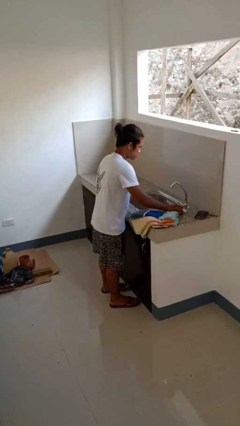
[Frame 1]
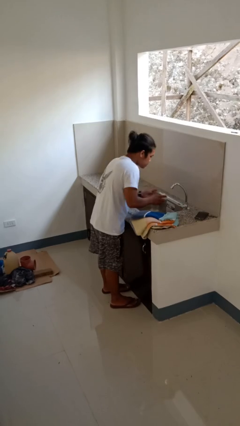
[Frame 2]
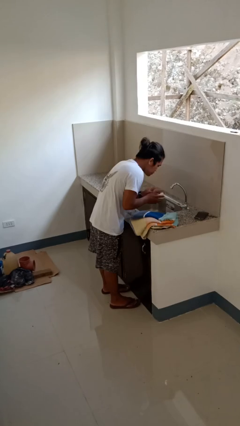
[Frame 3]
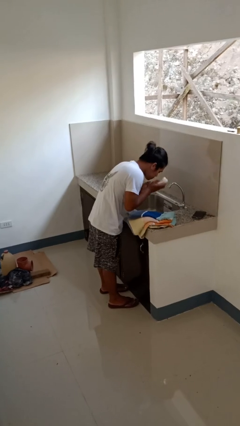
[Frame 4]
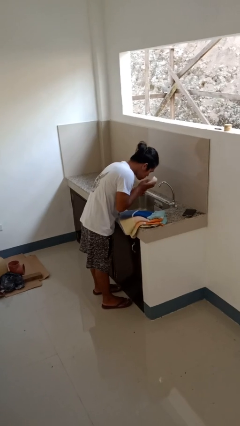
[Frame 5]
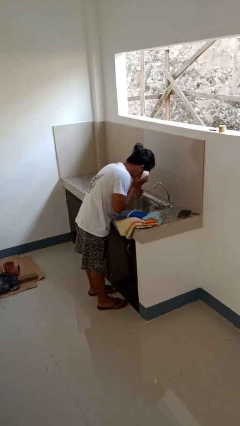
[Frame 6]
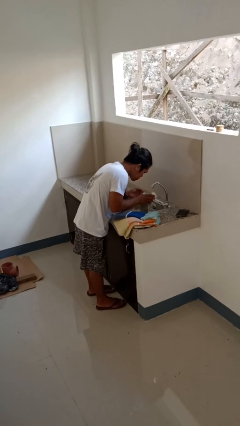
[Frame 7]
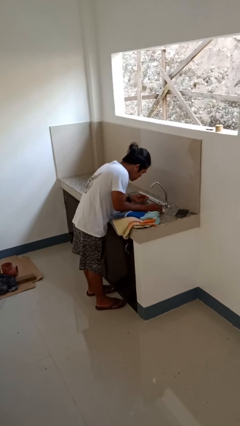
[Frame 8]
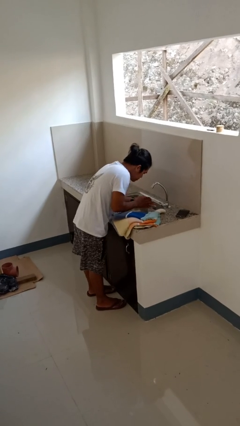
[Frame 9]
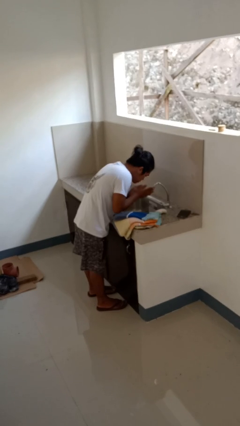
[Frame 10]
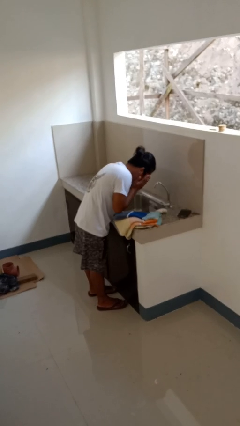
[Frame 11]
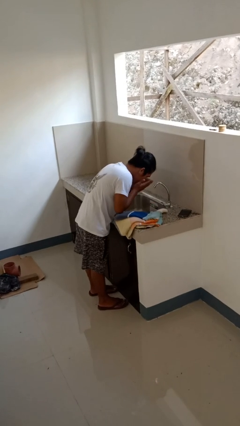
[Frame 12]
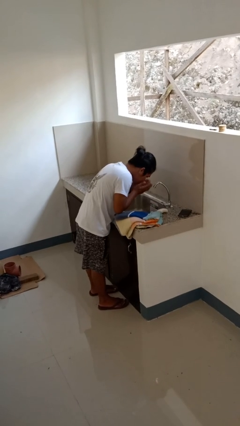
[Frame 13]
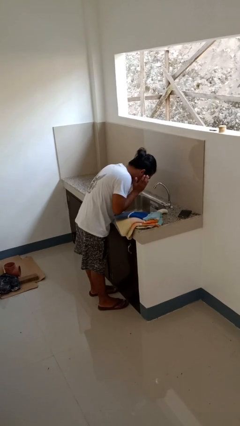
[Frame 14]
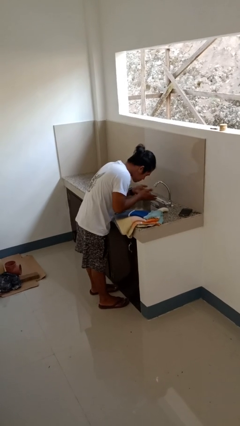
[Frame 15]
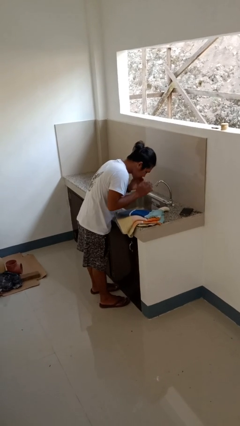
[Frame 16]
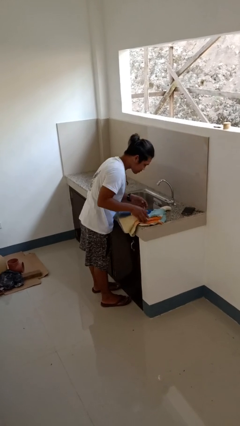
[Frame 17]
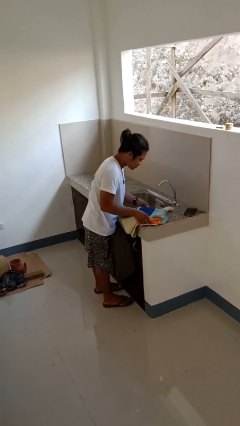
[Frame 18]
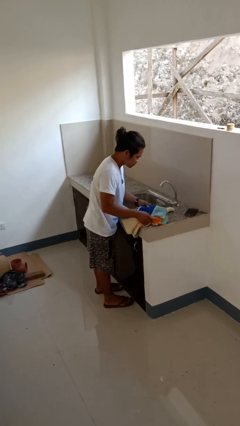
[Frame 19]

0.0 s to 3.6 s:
person washes face

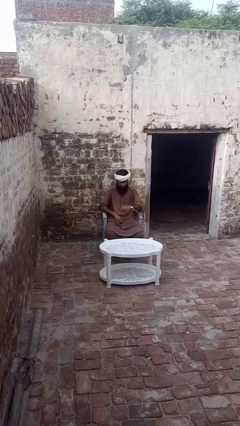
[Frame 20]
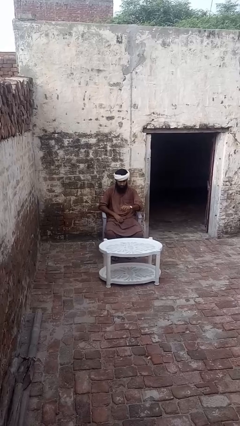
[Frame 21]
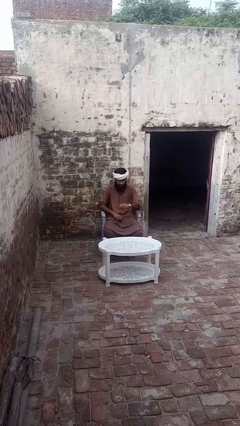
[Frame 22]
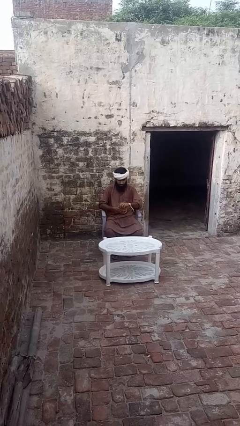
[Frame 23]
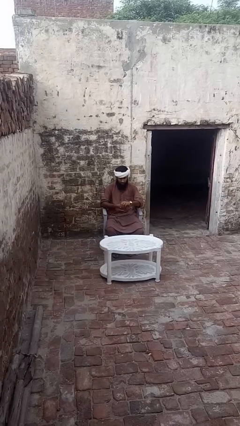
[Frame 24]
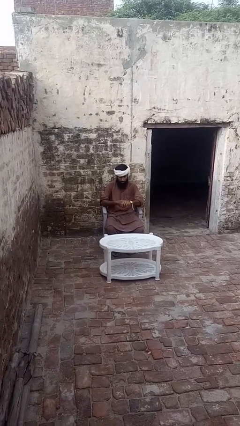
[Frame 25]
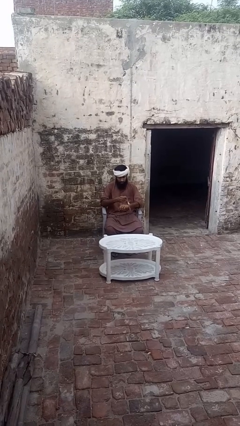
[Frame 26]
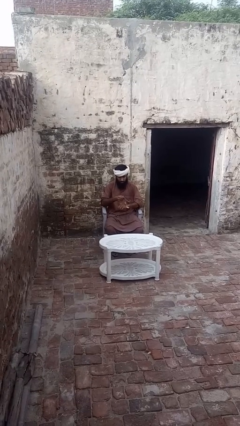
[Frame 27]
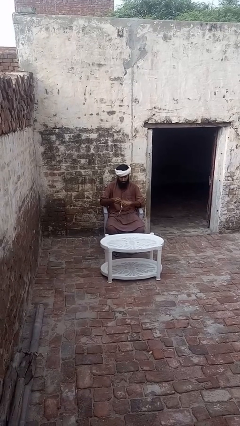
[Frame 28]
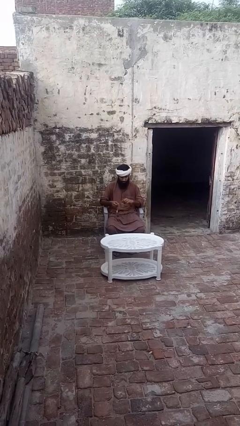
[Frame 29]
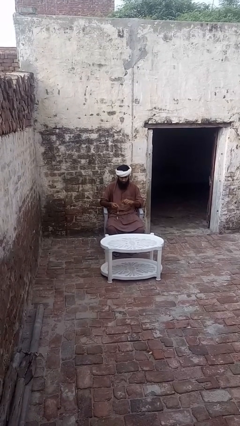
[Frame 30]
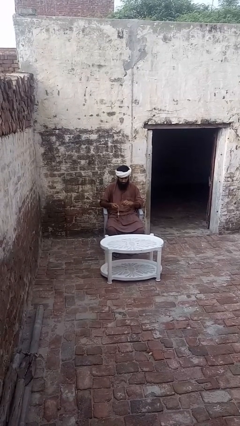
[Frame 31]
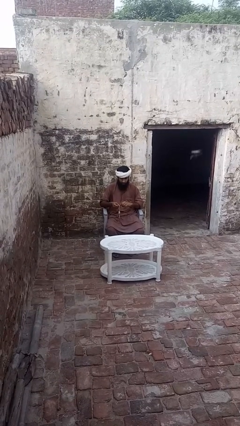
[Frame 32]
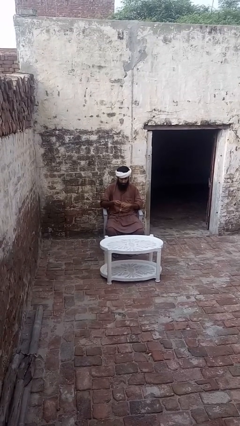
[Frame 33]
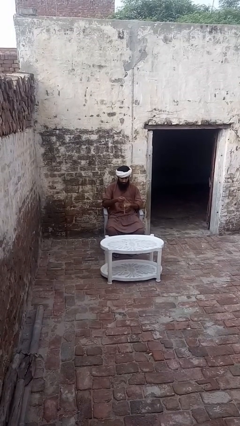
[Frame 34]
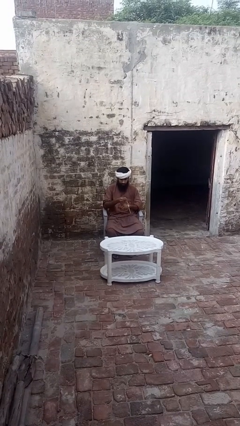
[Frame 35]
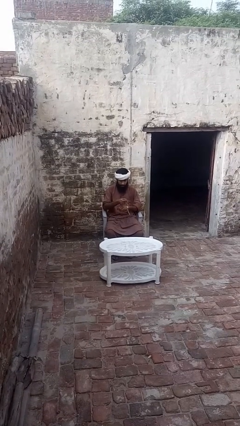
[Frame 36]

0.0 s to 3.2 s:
person takes off wristwatch

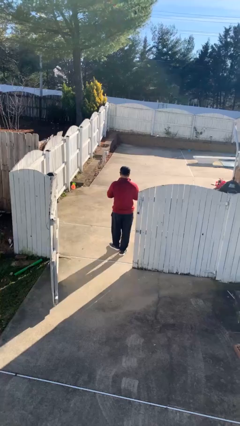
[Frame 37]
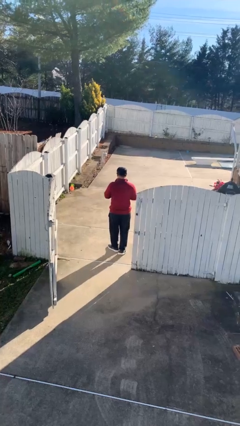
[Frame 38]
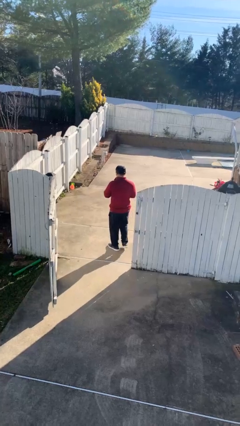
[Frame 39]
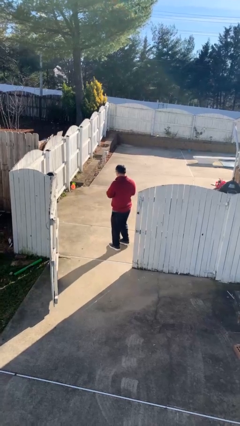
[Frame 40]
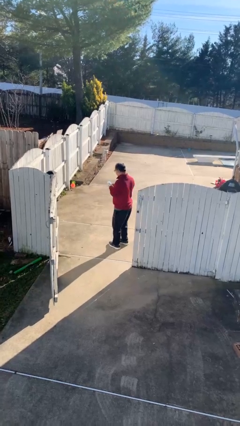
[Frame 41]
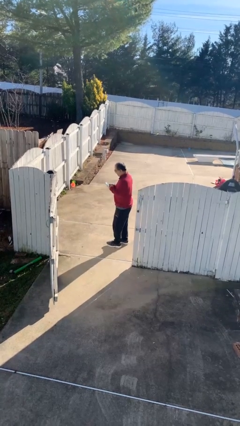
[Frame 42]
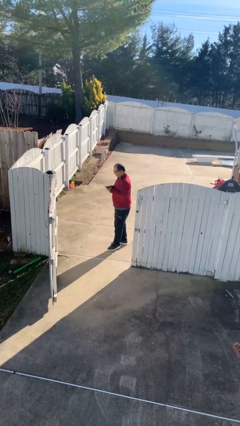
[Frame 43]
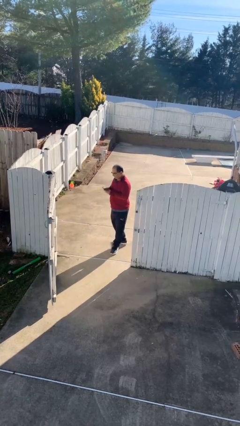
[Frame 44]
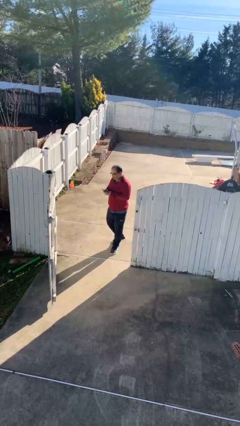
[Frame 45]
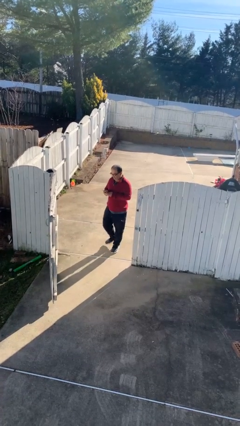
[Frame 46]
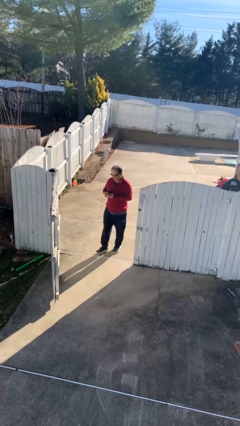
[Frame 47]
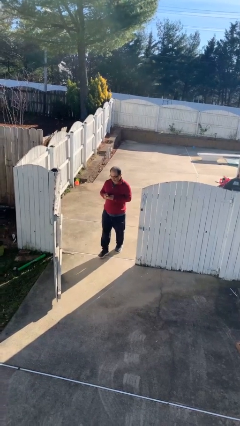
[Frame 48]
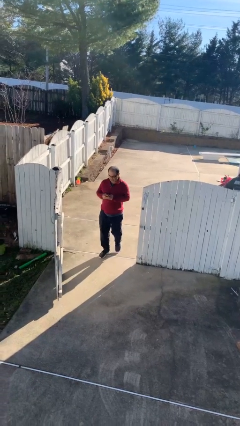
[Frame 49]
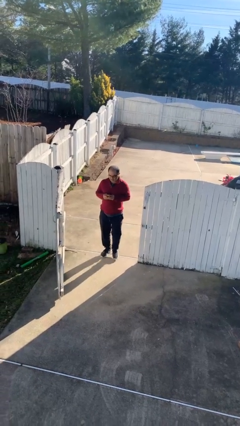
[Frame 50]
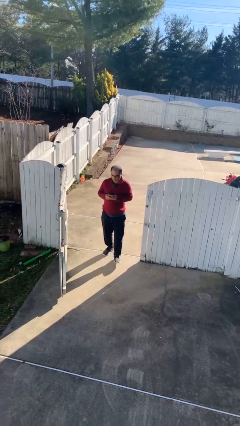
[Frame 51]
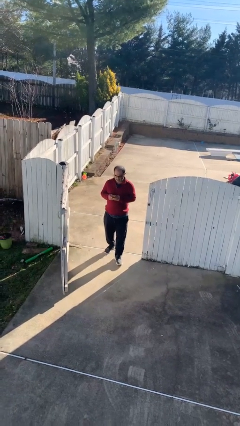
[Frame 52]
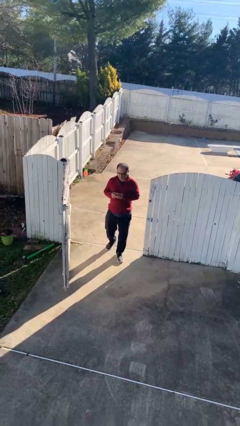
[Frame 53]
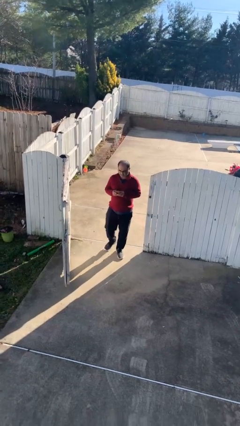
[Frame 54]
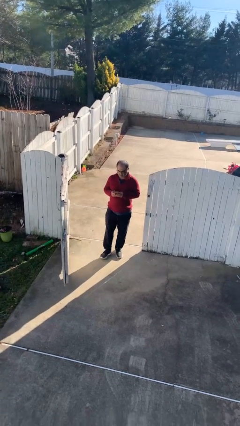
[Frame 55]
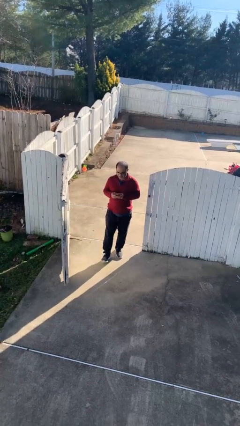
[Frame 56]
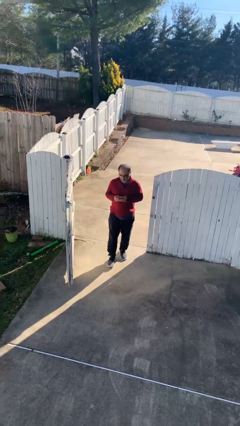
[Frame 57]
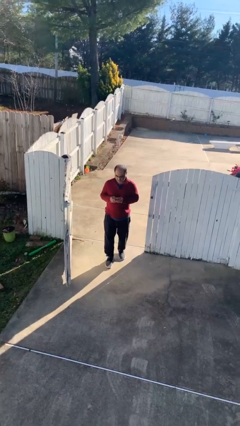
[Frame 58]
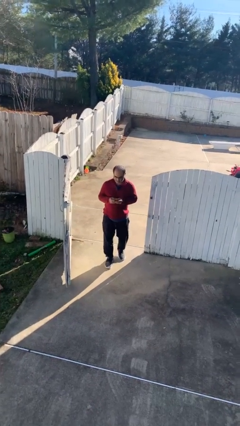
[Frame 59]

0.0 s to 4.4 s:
person enters scene through structure
